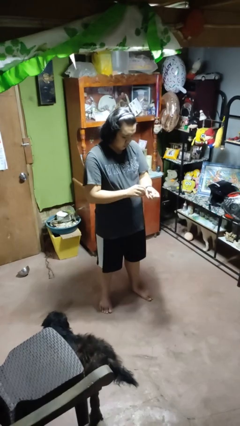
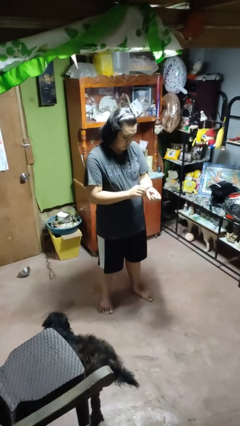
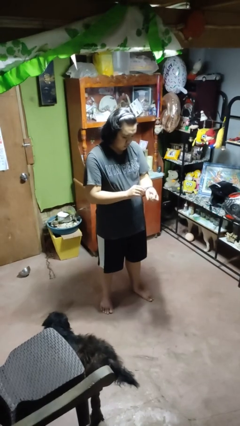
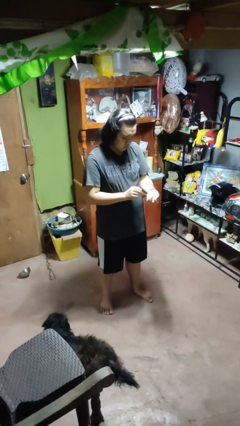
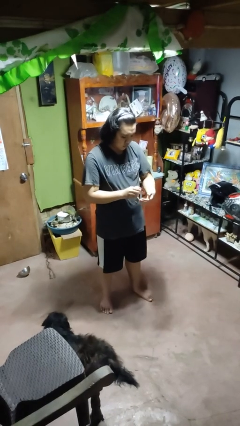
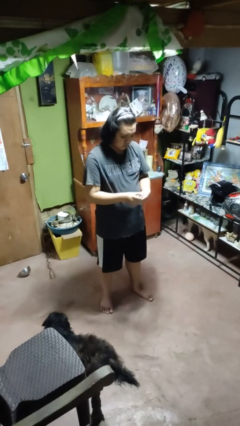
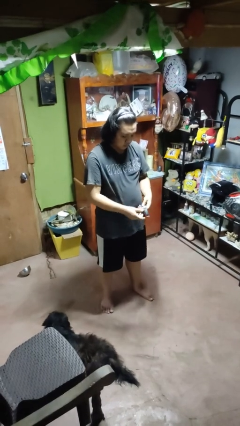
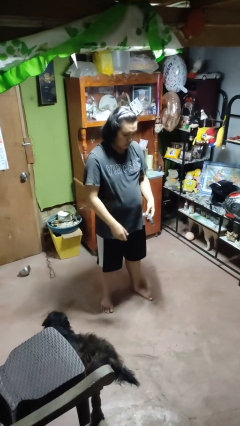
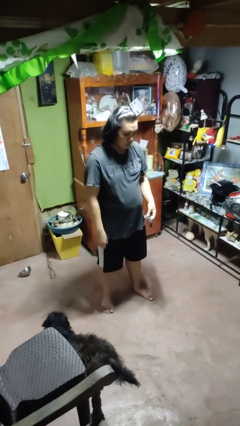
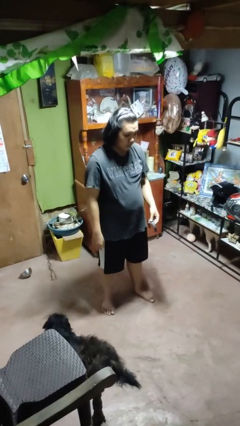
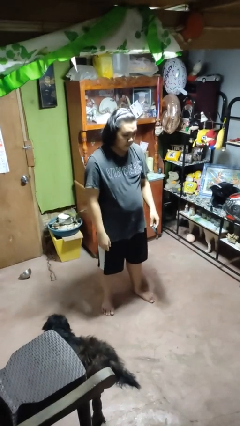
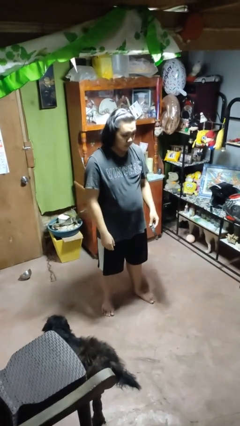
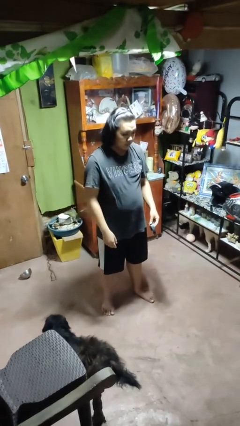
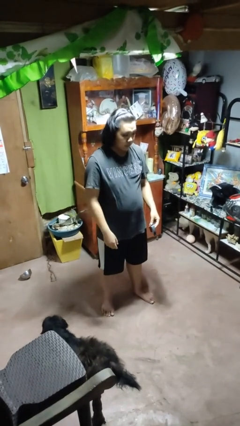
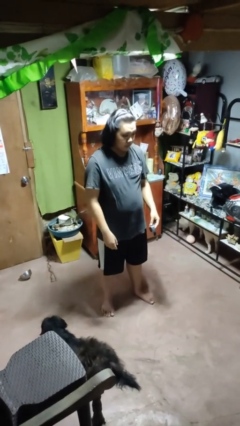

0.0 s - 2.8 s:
person takes off wristwatch

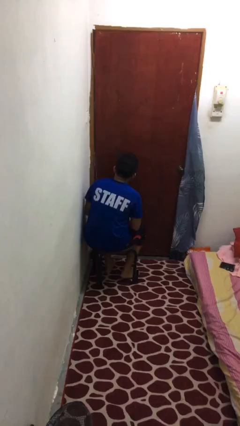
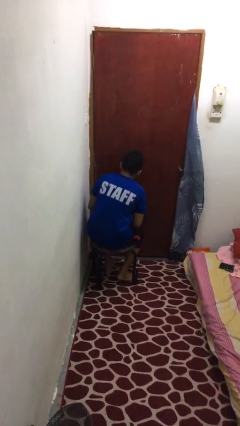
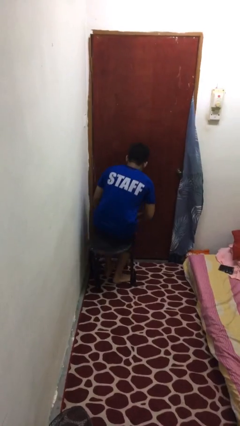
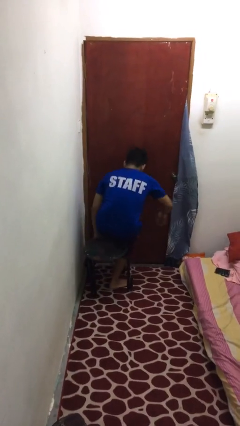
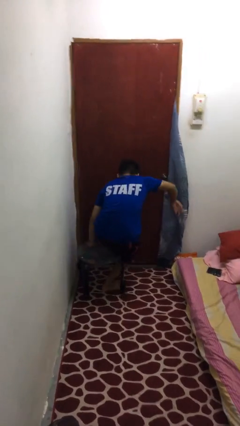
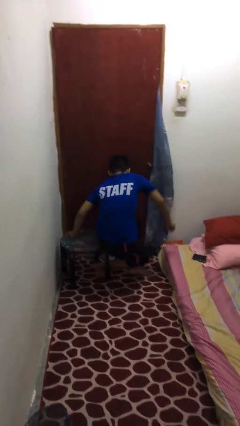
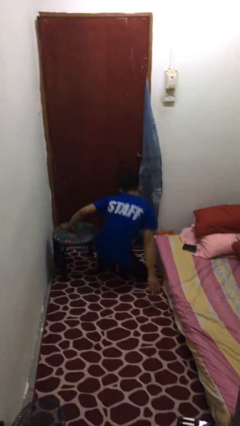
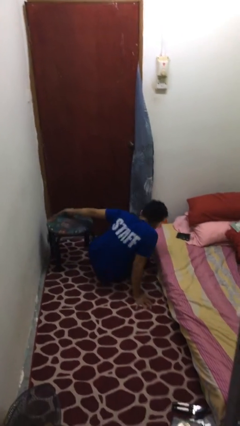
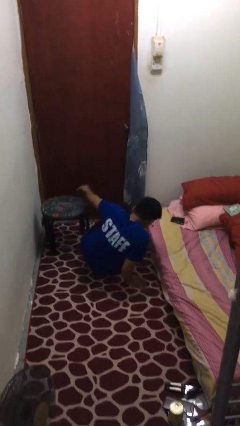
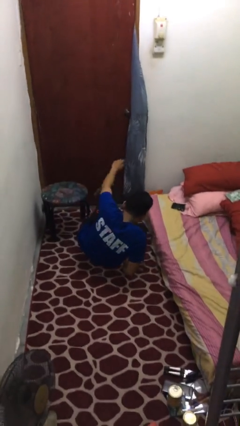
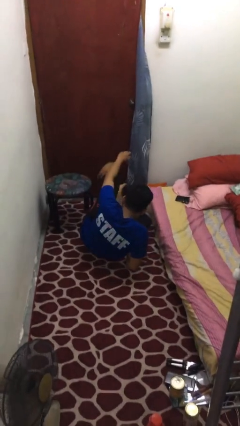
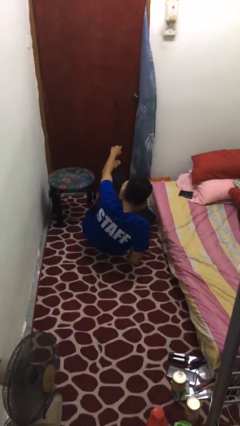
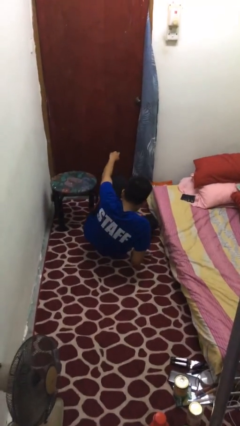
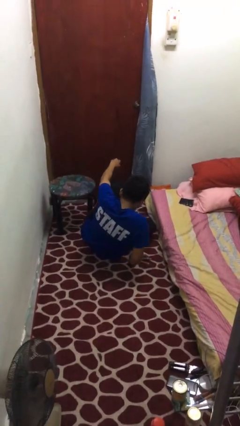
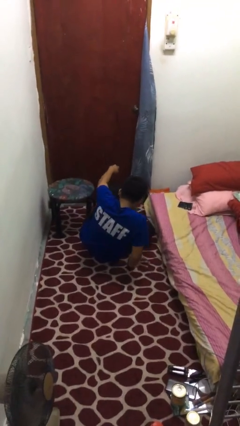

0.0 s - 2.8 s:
person falls from chair

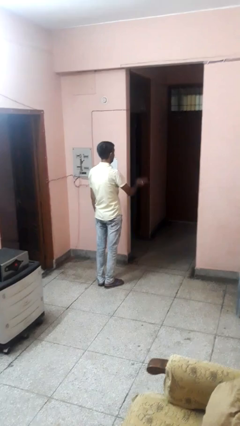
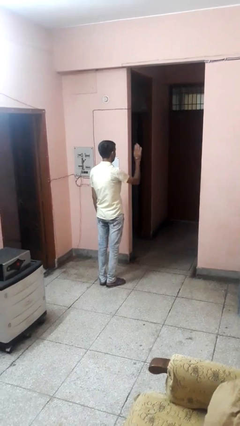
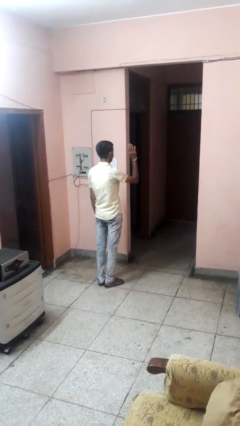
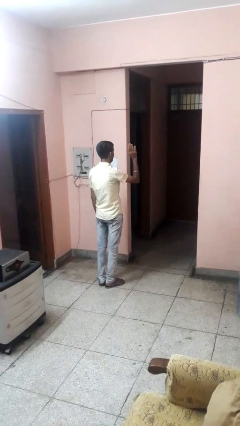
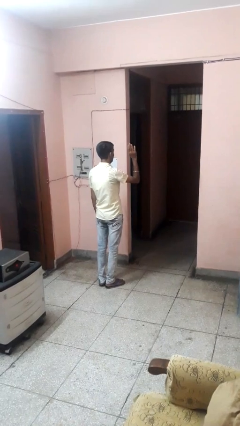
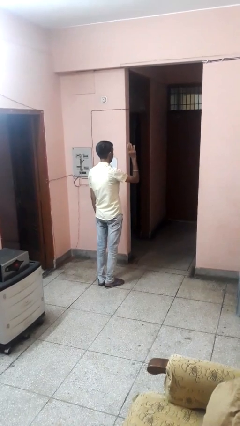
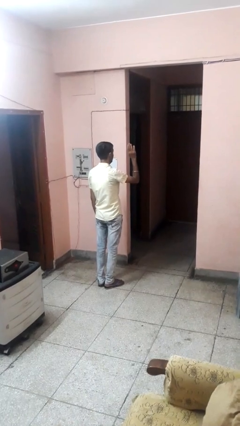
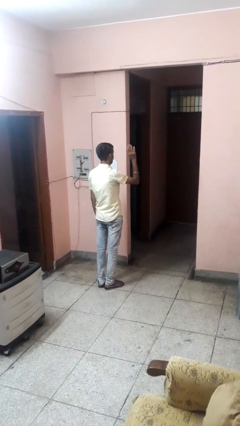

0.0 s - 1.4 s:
person gestures swipe up

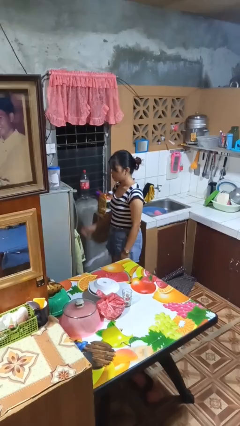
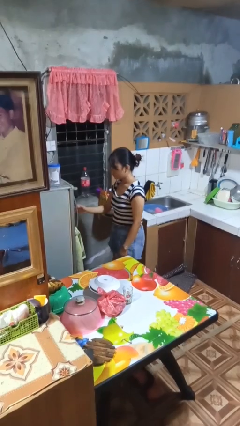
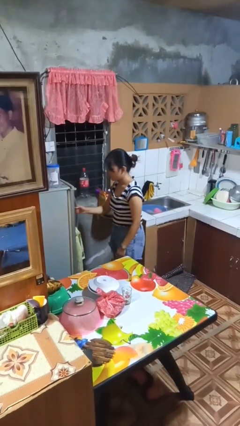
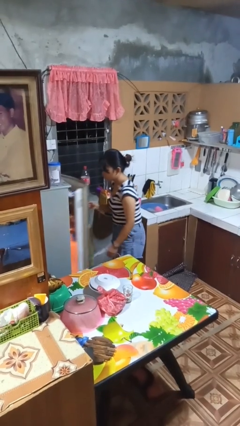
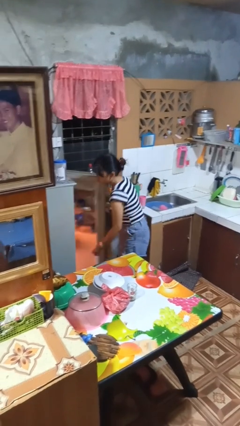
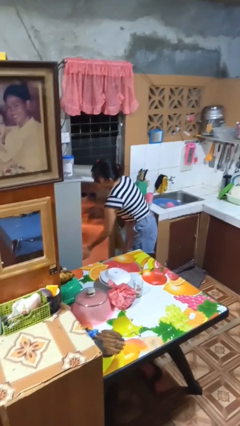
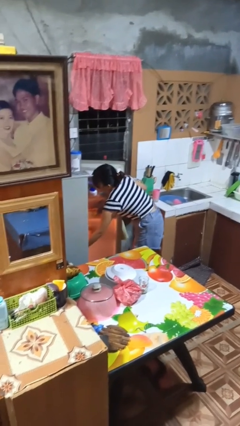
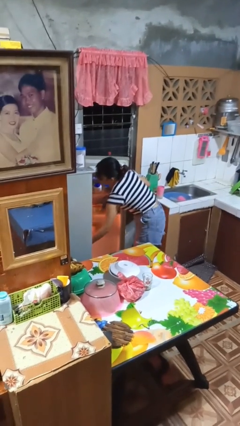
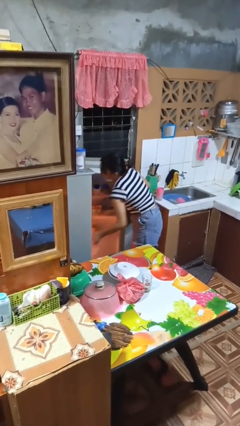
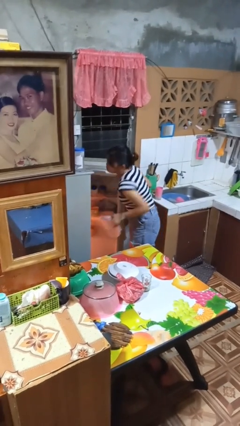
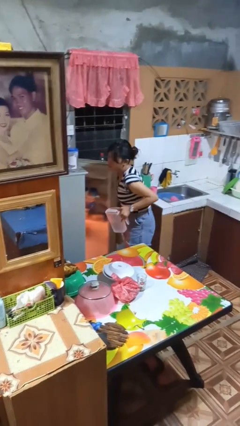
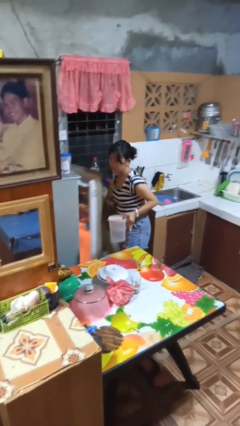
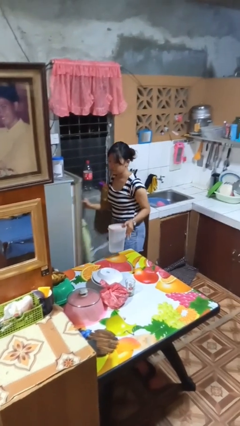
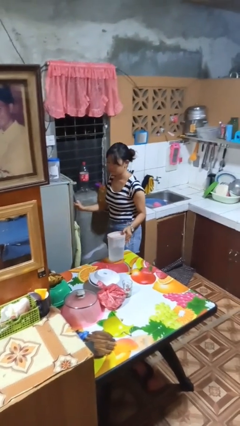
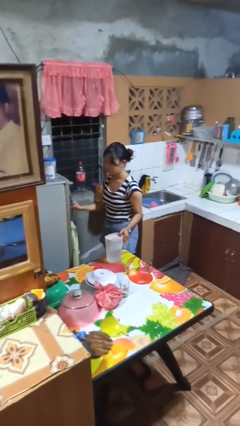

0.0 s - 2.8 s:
person takes object from refrigerator

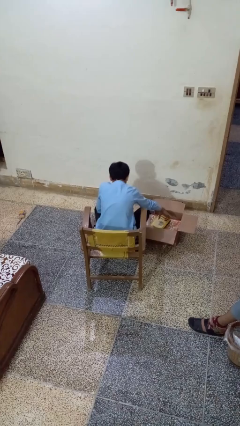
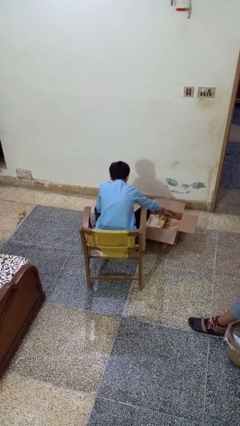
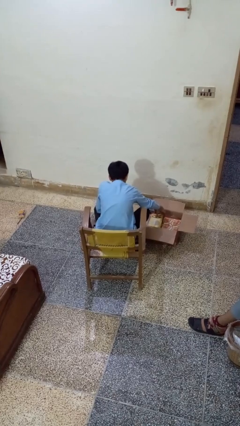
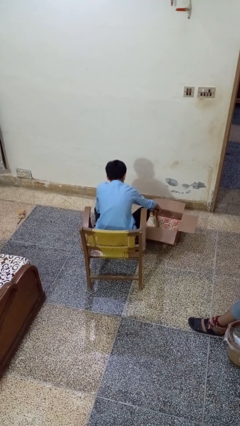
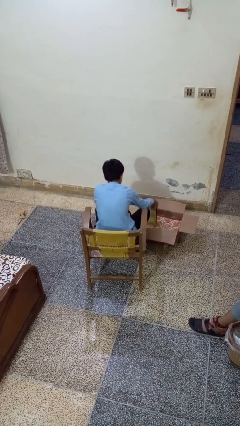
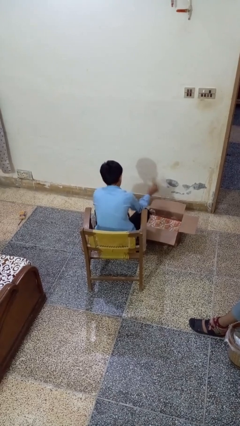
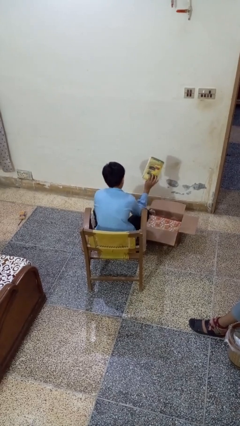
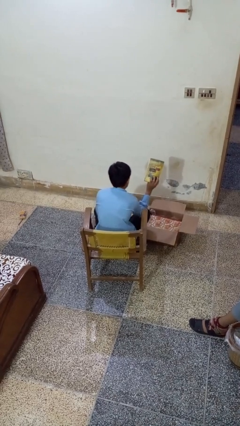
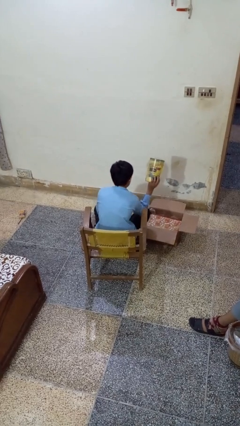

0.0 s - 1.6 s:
person takes object from box

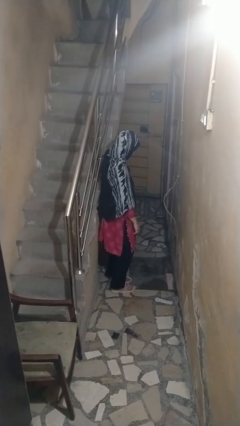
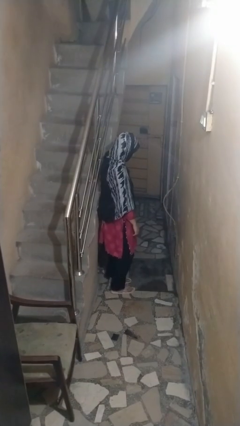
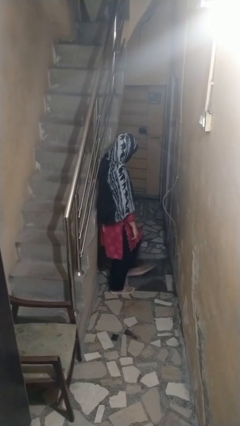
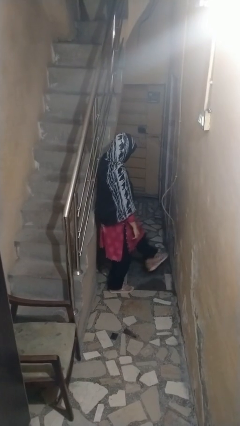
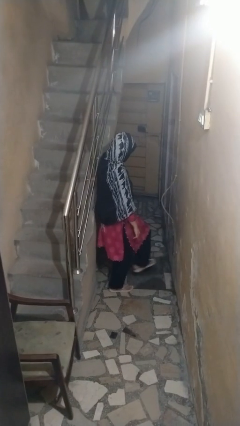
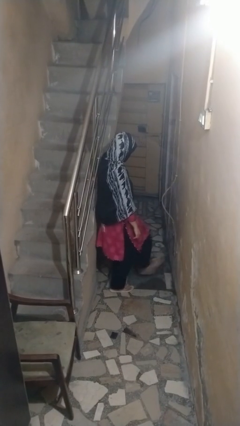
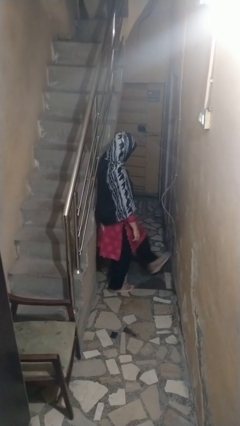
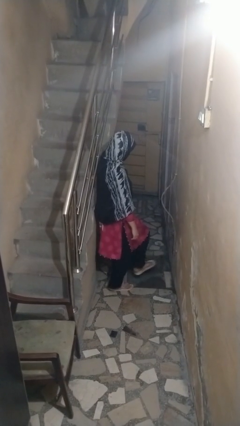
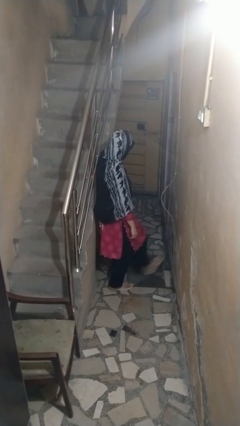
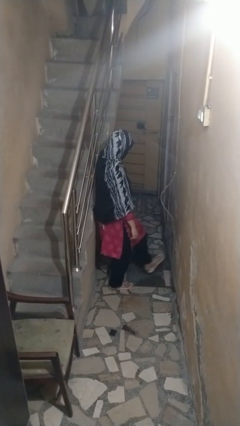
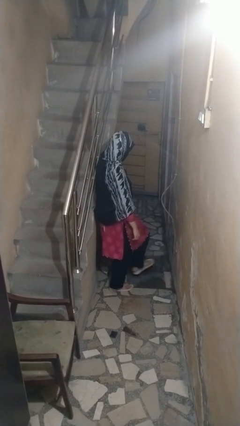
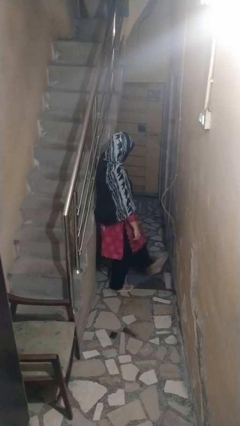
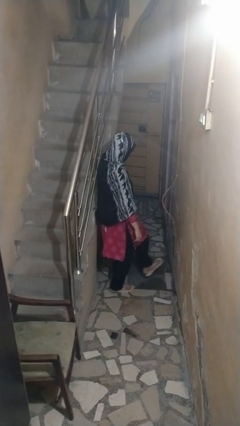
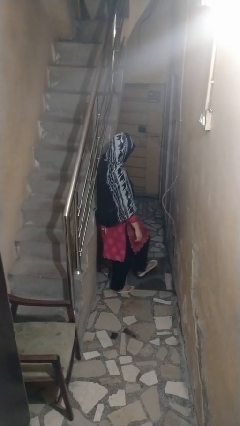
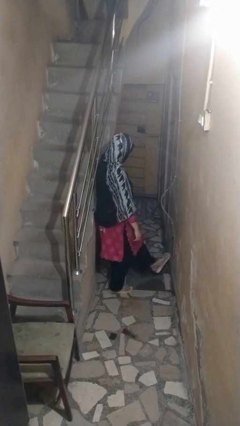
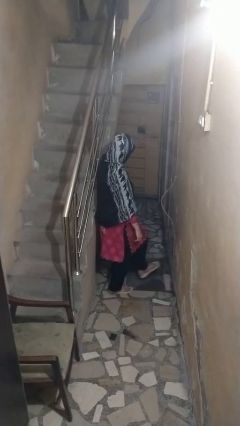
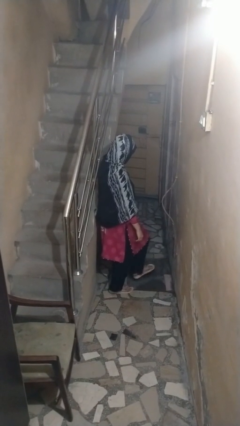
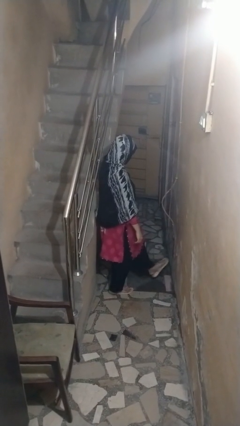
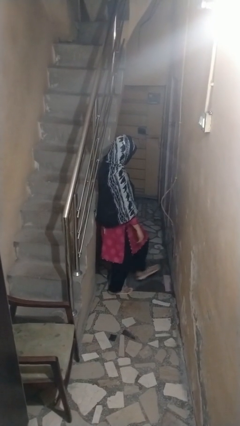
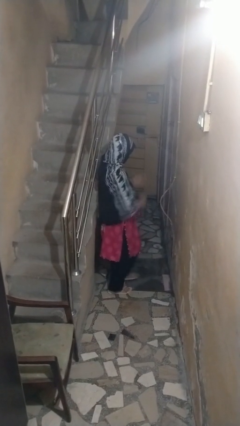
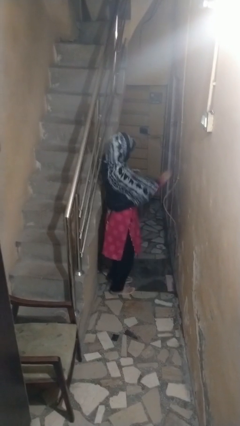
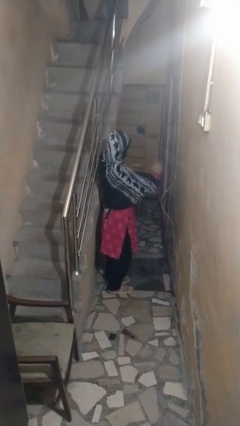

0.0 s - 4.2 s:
person karate kicks

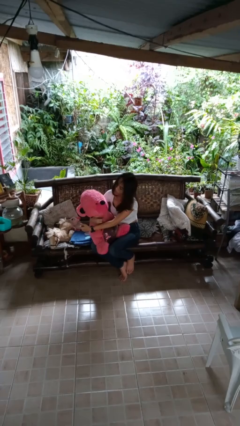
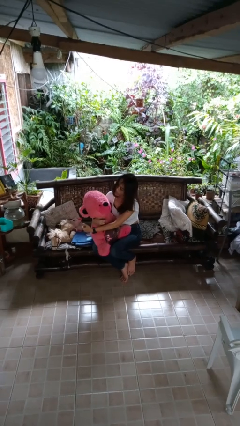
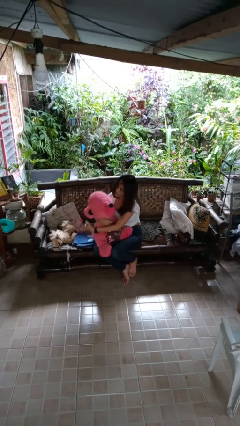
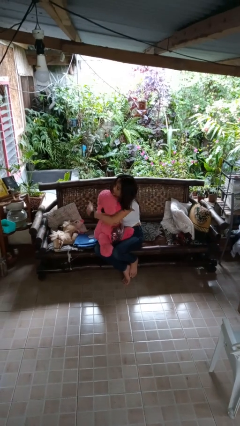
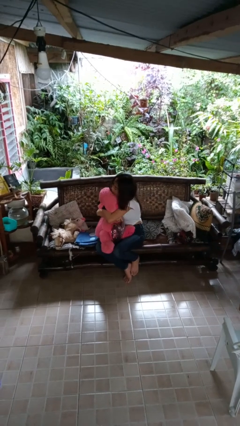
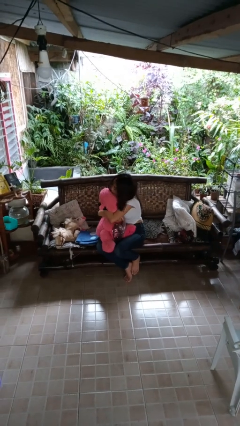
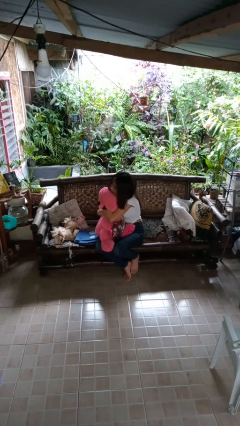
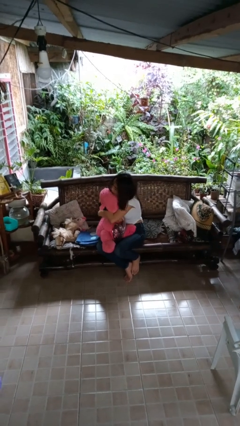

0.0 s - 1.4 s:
person hugs stuffed animal
